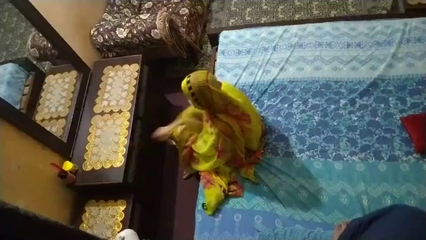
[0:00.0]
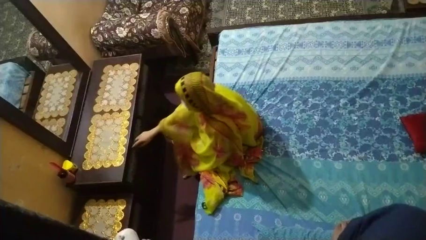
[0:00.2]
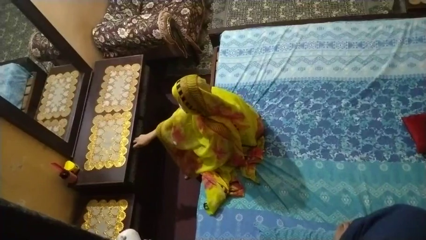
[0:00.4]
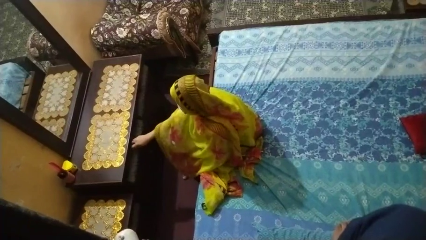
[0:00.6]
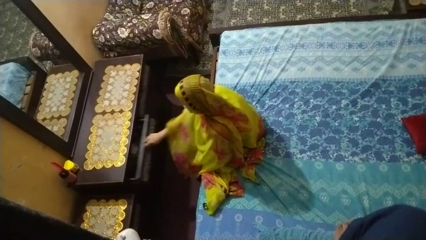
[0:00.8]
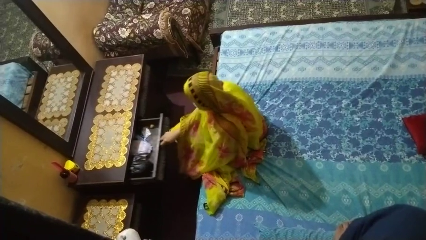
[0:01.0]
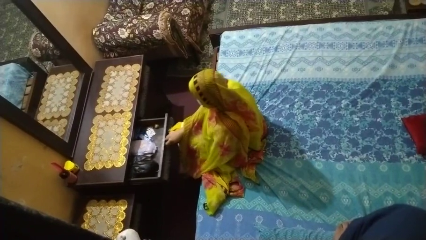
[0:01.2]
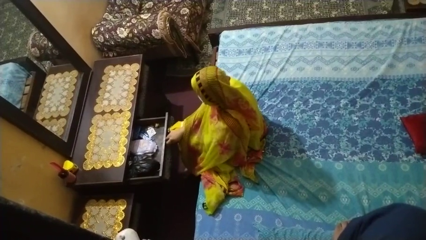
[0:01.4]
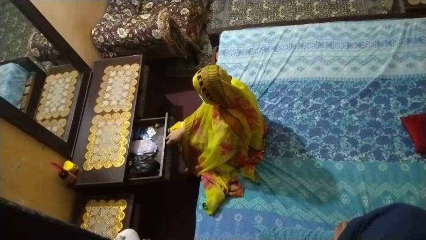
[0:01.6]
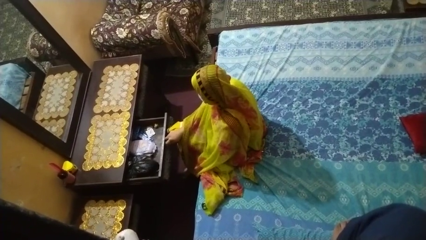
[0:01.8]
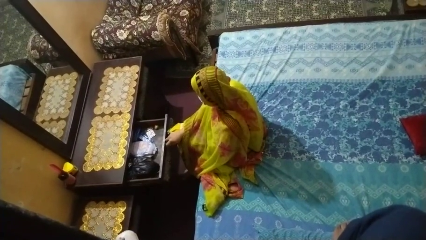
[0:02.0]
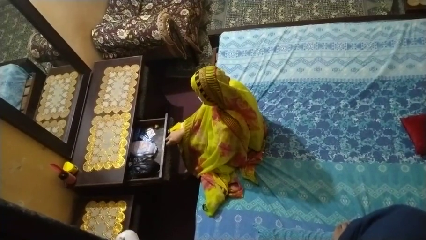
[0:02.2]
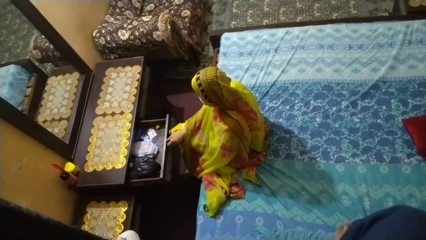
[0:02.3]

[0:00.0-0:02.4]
person opens dresser drawer

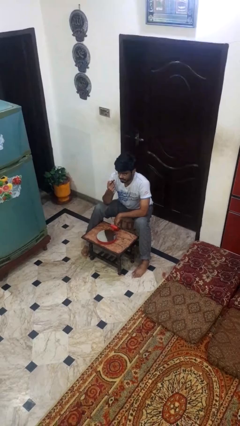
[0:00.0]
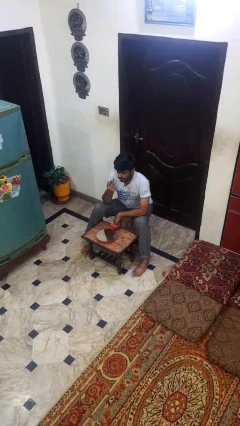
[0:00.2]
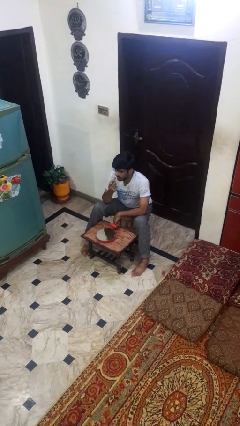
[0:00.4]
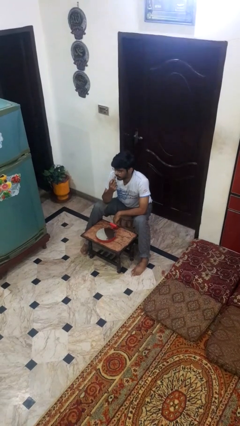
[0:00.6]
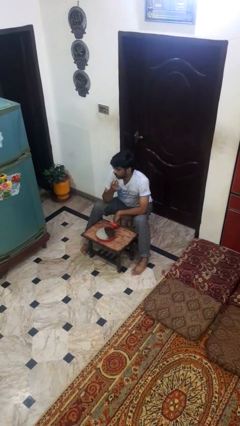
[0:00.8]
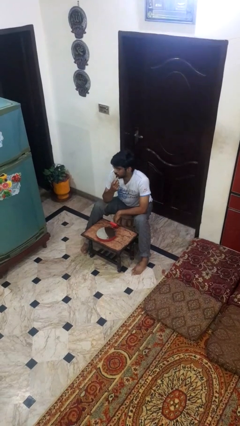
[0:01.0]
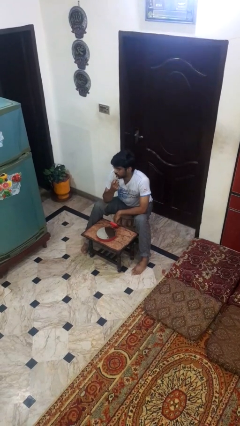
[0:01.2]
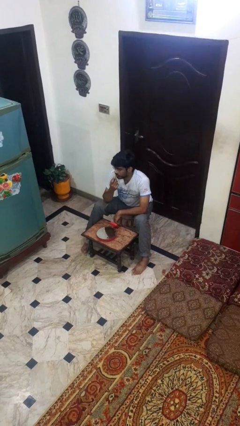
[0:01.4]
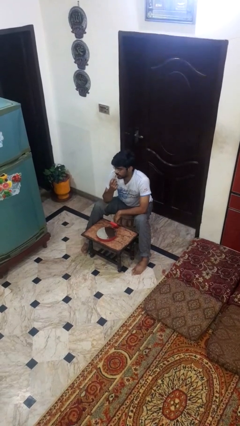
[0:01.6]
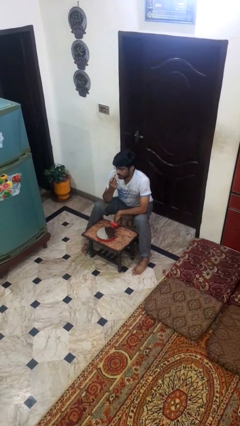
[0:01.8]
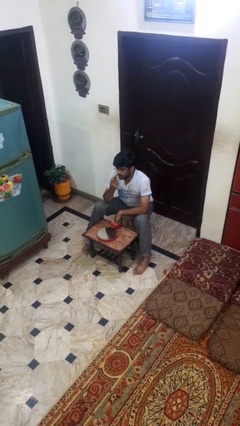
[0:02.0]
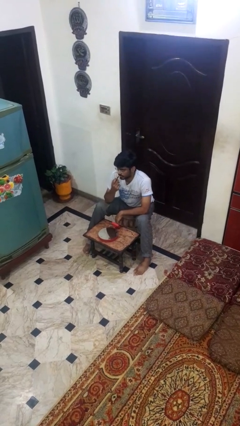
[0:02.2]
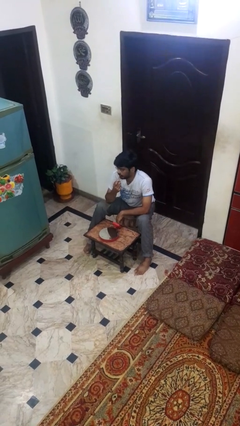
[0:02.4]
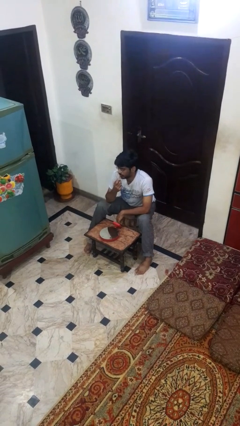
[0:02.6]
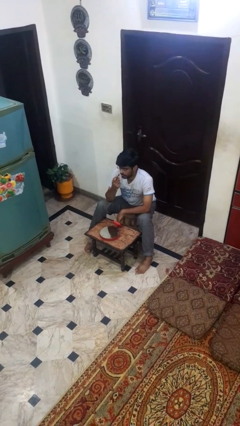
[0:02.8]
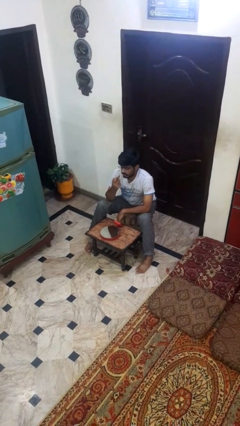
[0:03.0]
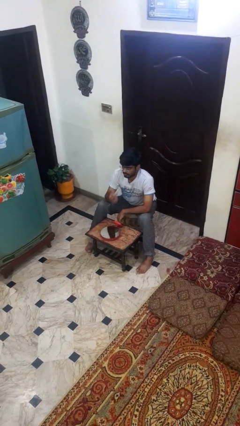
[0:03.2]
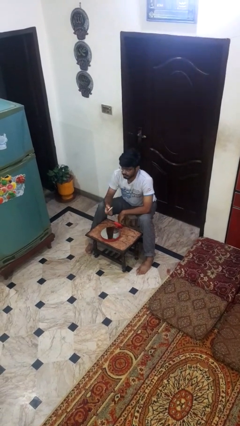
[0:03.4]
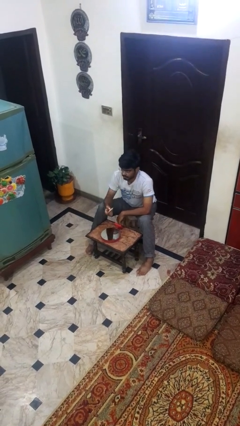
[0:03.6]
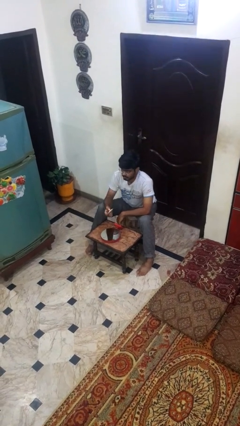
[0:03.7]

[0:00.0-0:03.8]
person applies lip makeup

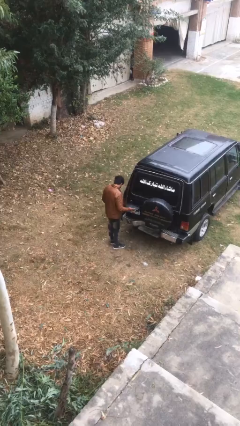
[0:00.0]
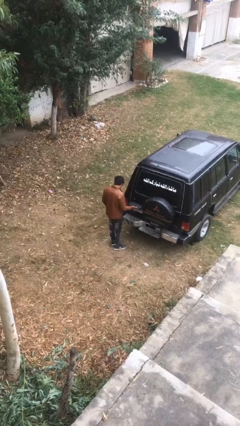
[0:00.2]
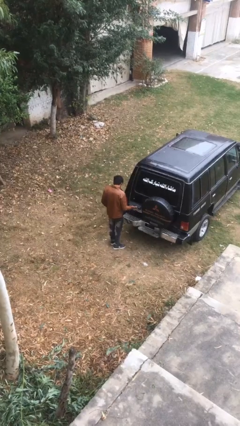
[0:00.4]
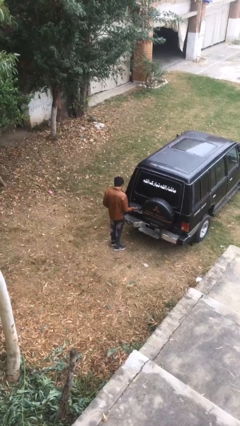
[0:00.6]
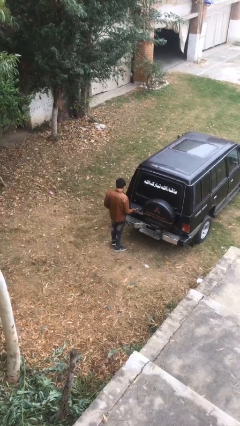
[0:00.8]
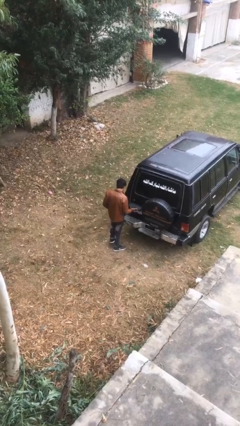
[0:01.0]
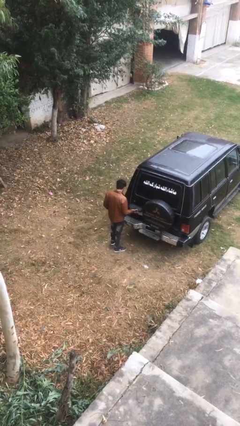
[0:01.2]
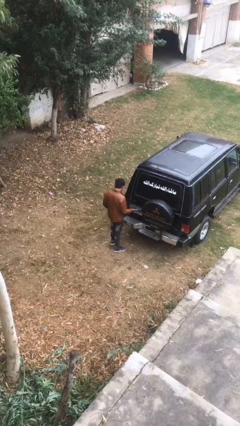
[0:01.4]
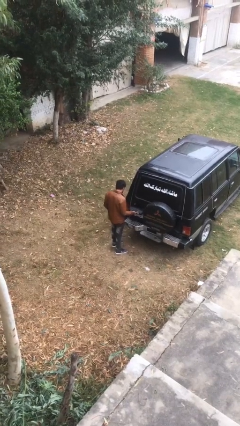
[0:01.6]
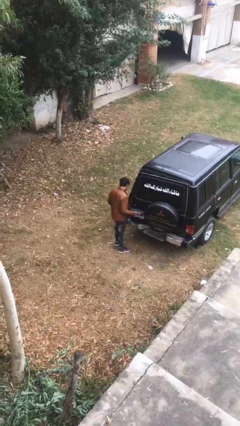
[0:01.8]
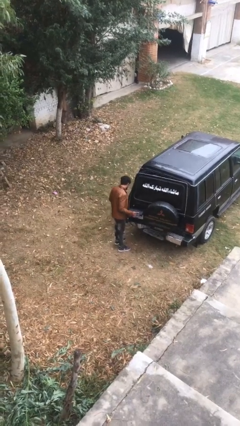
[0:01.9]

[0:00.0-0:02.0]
person closes car trunk

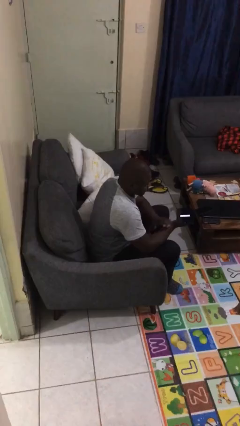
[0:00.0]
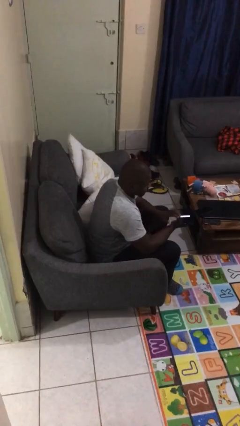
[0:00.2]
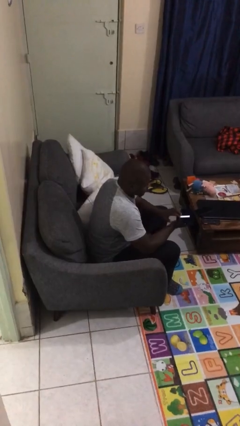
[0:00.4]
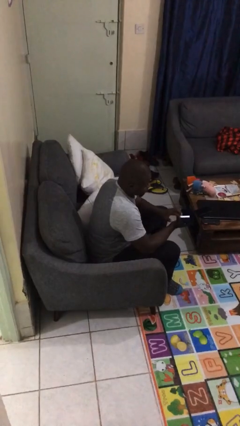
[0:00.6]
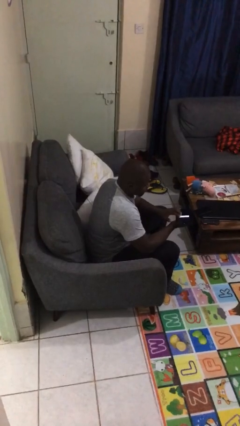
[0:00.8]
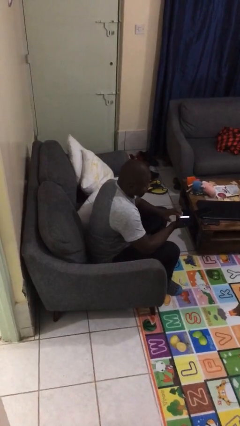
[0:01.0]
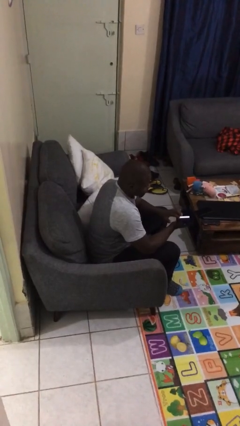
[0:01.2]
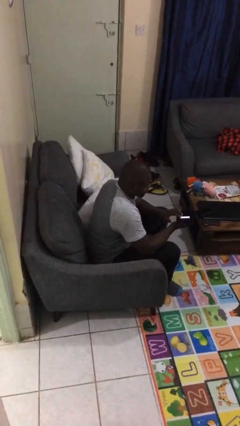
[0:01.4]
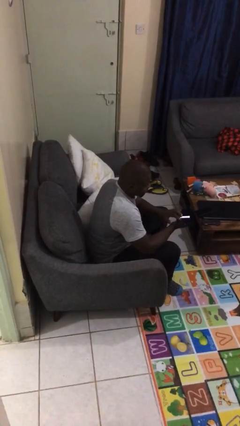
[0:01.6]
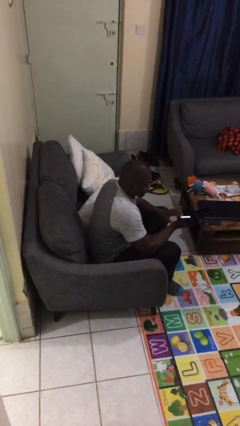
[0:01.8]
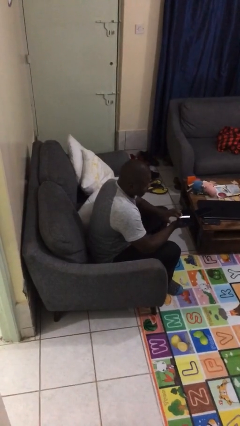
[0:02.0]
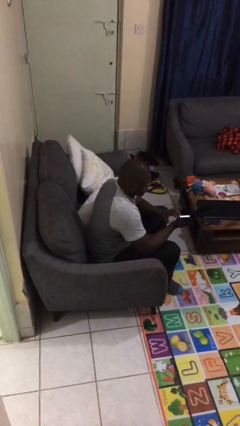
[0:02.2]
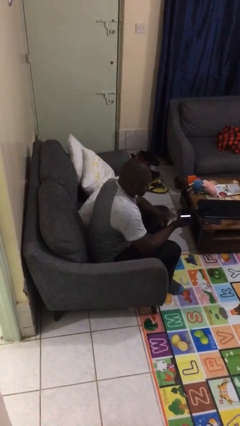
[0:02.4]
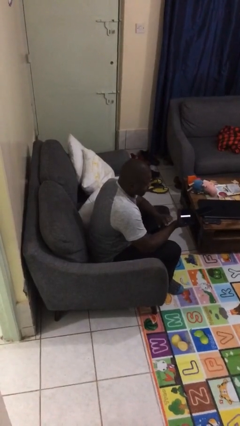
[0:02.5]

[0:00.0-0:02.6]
person interacts with tablet

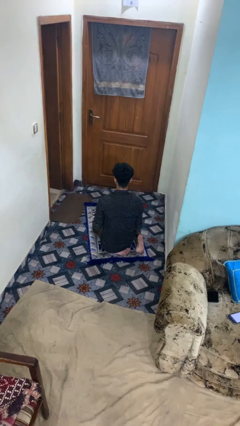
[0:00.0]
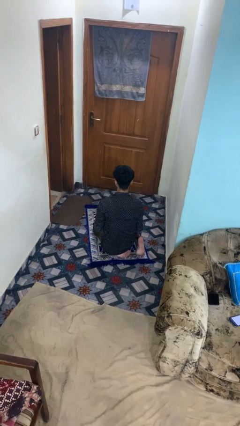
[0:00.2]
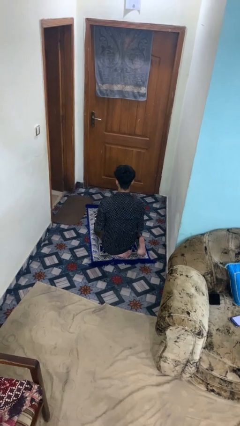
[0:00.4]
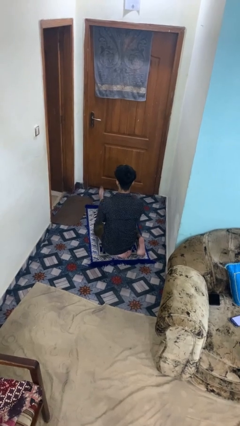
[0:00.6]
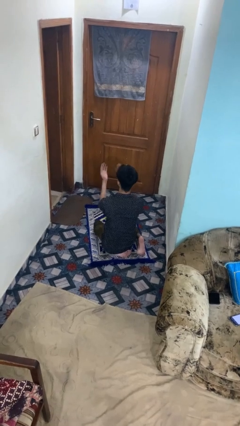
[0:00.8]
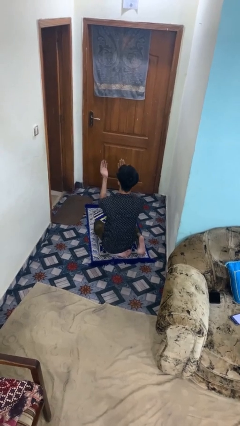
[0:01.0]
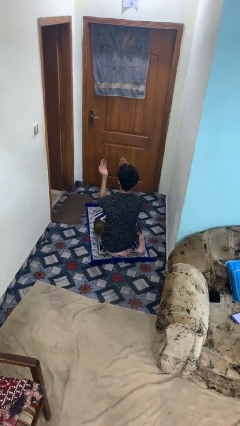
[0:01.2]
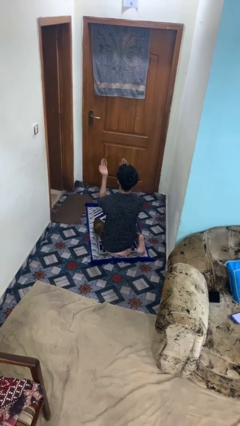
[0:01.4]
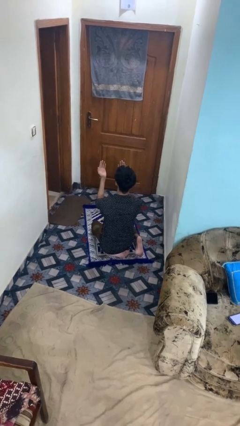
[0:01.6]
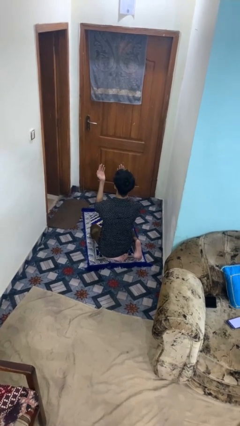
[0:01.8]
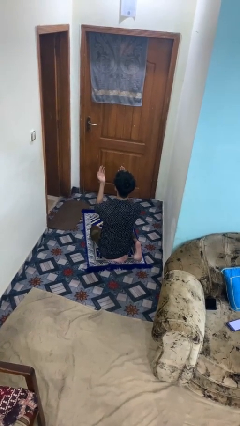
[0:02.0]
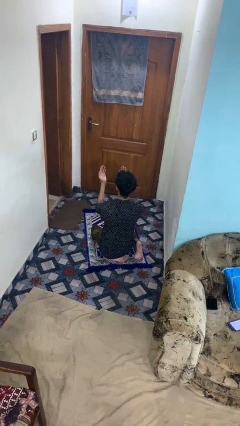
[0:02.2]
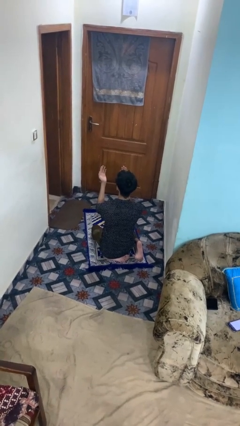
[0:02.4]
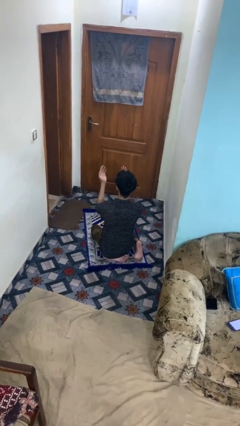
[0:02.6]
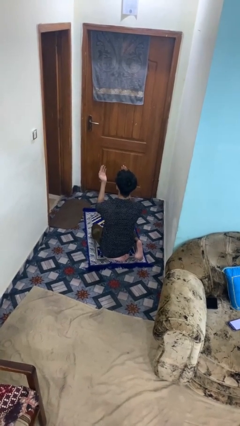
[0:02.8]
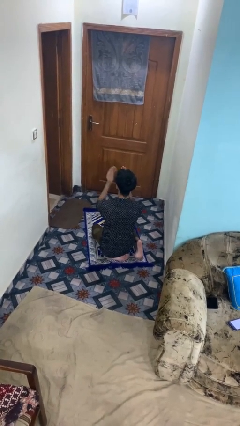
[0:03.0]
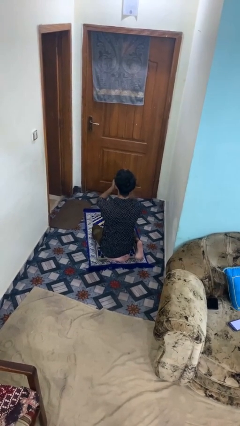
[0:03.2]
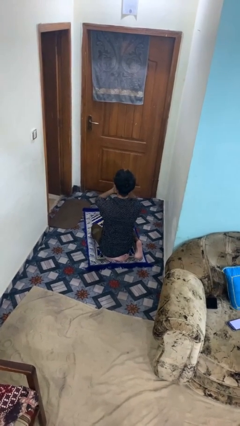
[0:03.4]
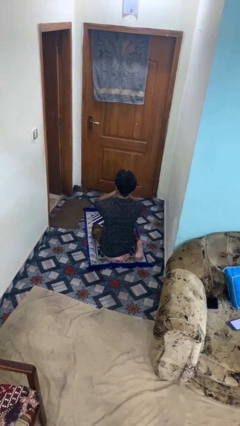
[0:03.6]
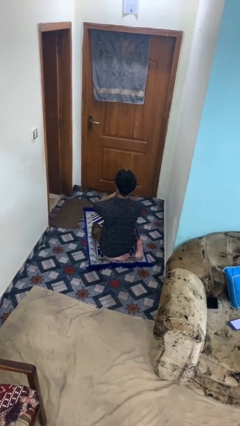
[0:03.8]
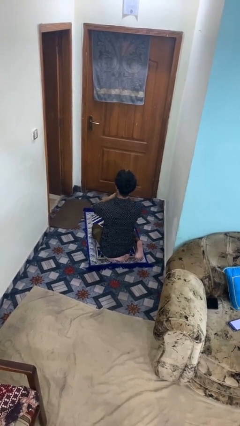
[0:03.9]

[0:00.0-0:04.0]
person prays

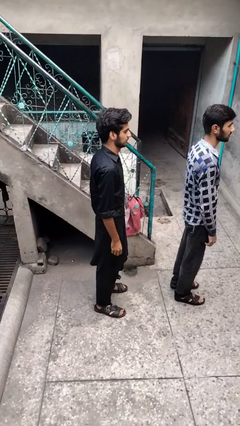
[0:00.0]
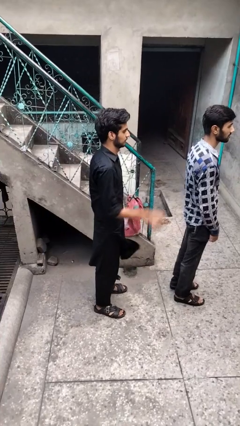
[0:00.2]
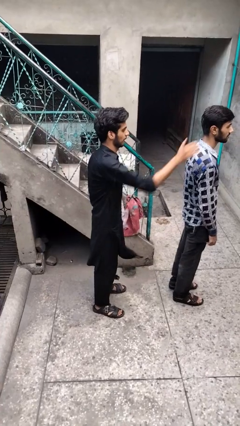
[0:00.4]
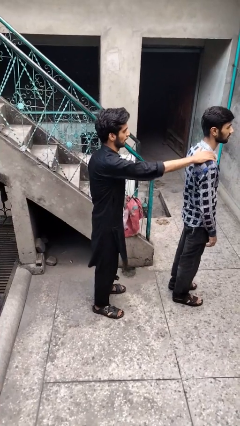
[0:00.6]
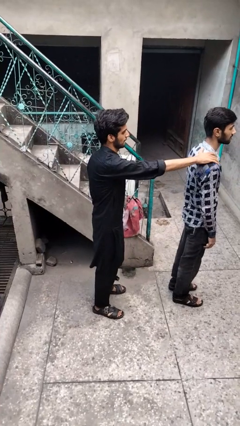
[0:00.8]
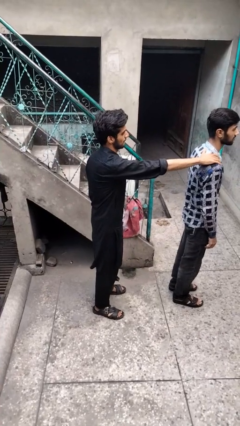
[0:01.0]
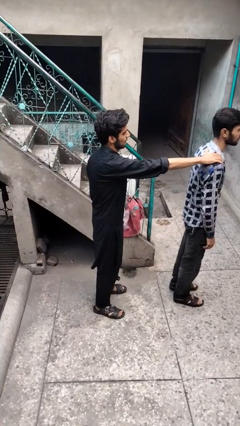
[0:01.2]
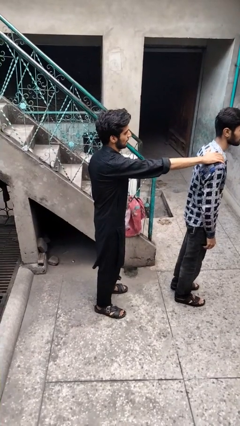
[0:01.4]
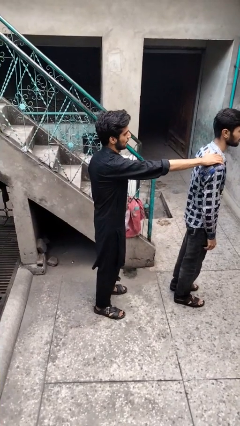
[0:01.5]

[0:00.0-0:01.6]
person grabs person by shoulder

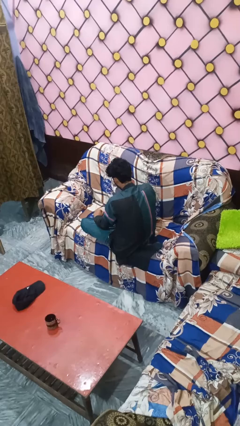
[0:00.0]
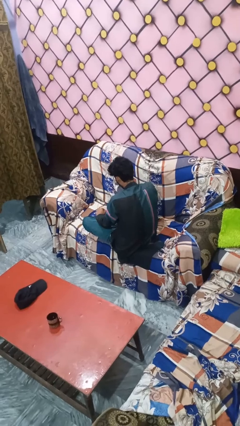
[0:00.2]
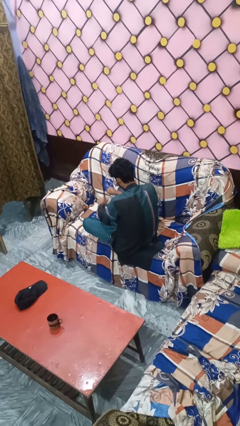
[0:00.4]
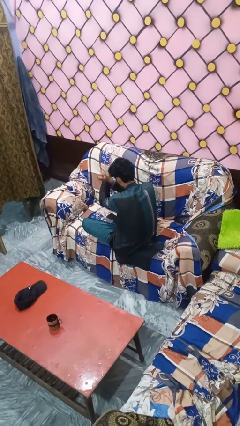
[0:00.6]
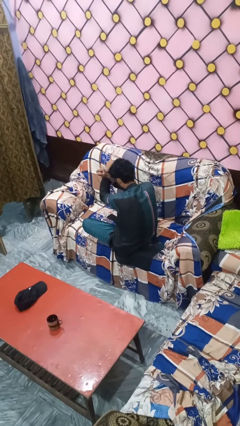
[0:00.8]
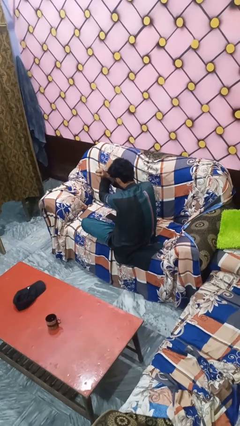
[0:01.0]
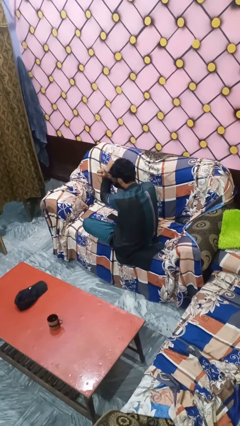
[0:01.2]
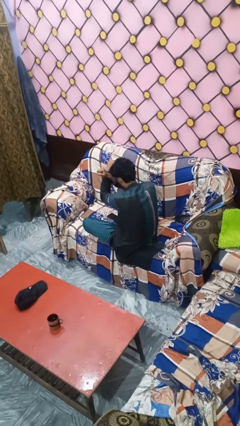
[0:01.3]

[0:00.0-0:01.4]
person gestures arms x
